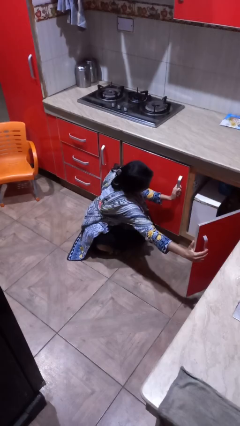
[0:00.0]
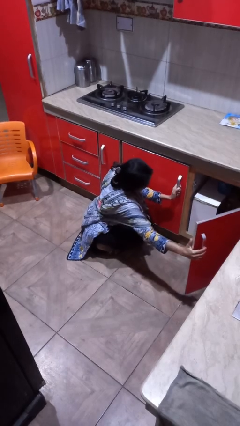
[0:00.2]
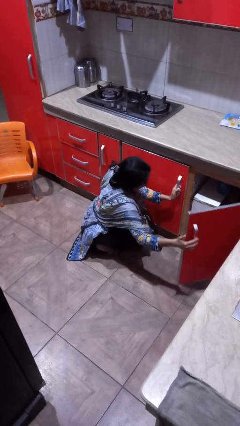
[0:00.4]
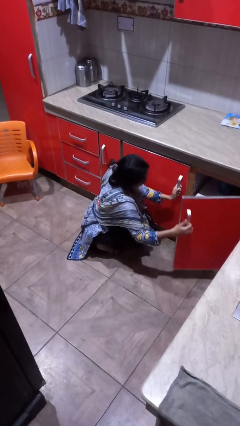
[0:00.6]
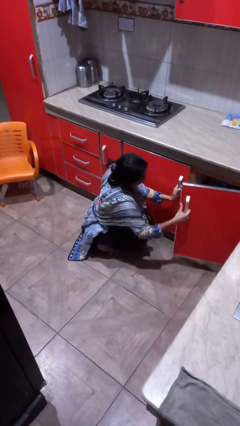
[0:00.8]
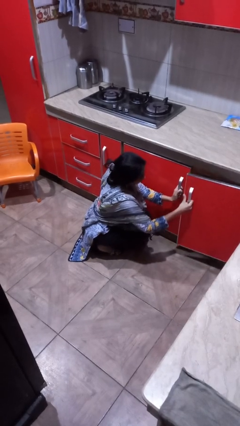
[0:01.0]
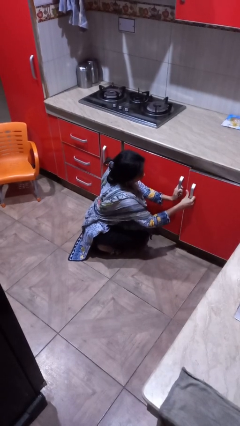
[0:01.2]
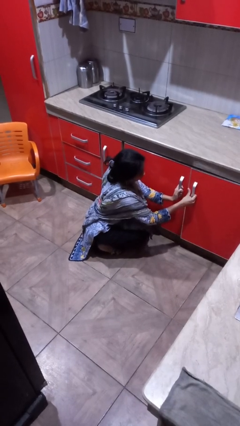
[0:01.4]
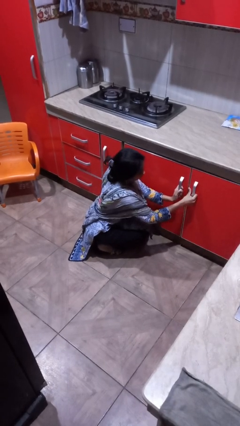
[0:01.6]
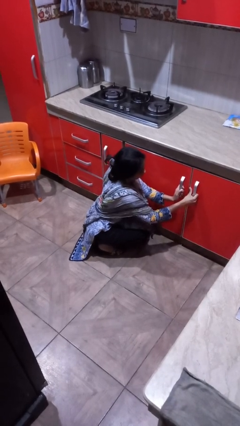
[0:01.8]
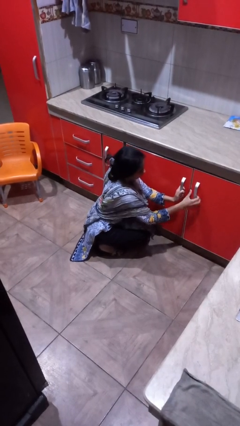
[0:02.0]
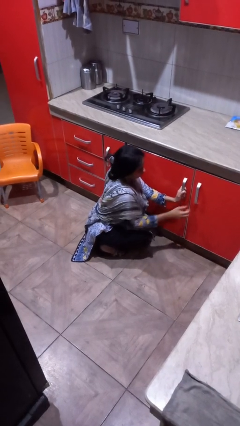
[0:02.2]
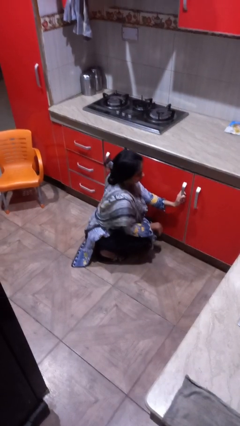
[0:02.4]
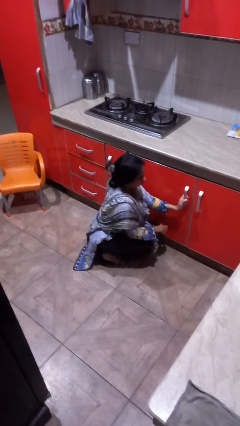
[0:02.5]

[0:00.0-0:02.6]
person closes cabinet

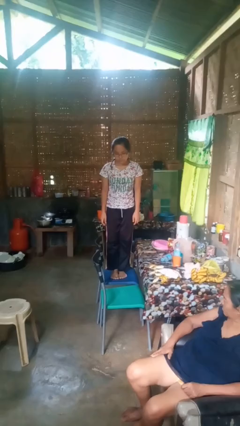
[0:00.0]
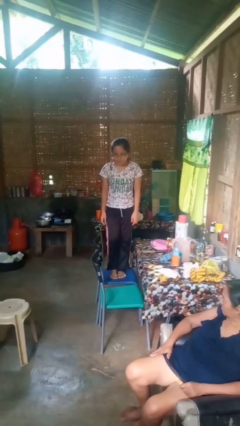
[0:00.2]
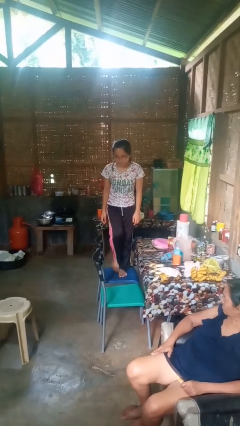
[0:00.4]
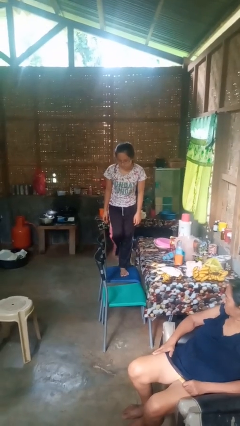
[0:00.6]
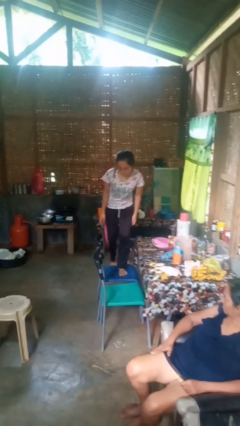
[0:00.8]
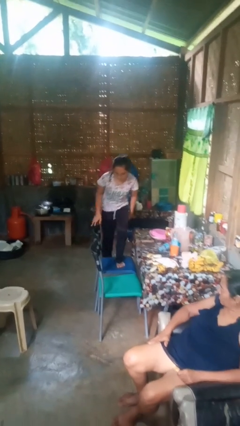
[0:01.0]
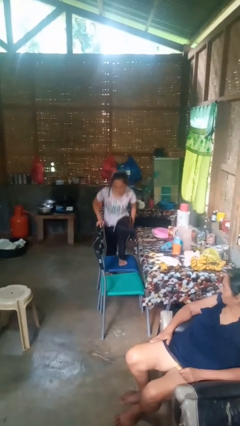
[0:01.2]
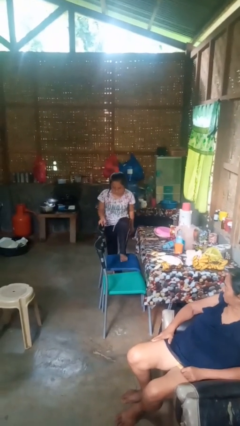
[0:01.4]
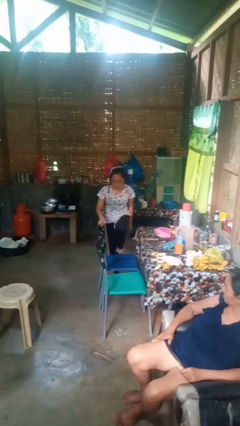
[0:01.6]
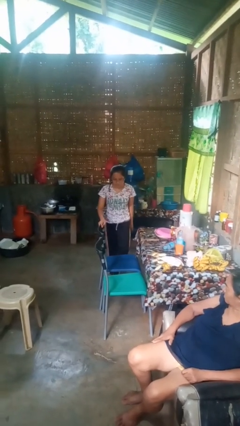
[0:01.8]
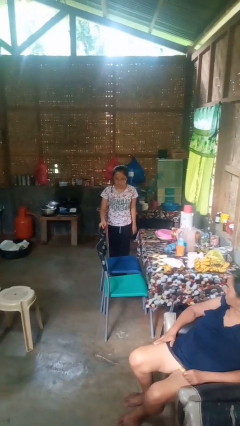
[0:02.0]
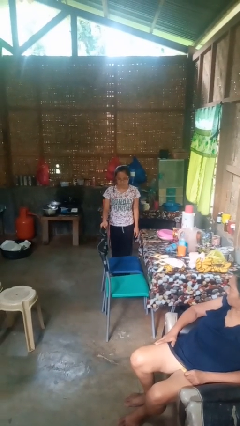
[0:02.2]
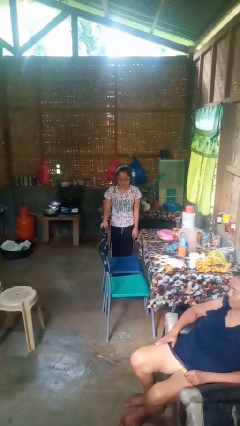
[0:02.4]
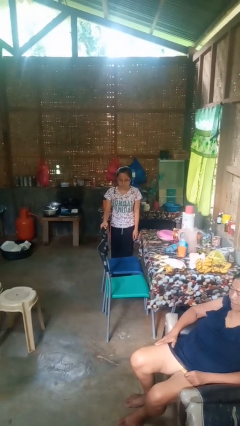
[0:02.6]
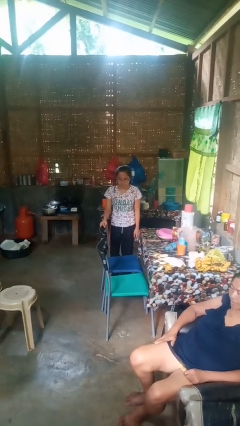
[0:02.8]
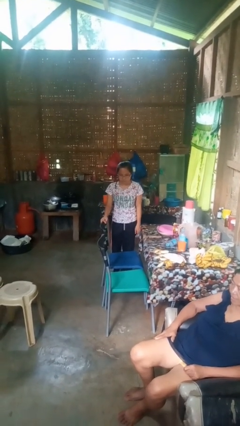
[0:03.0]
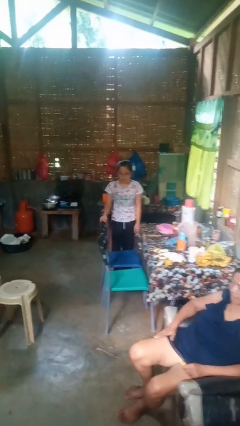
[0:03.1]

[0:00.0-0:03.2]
person climbs off chair

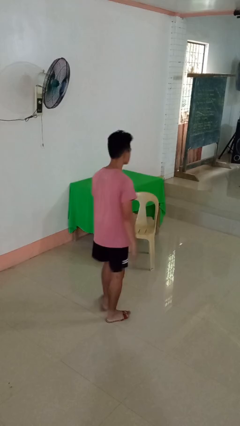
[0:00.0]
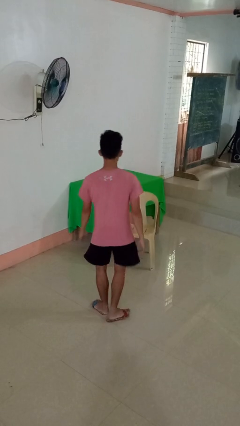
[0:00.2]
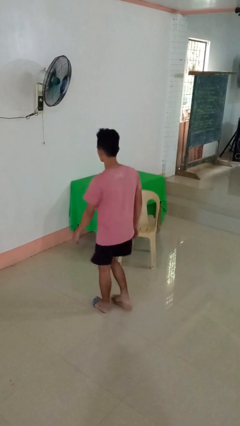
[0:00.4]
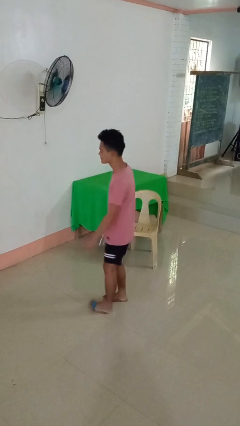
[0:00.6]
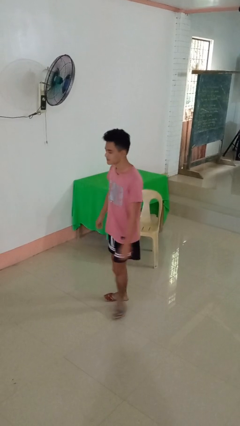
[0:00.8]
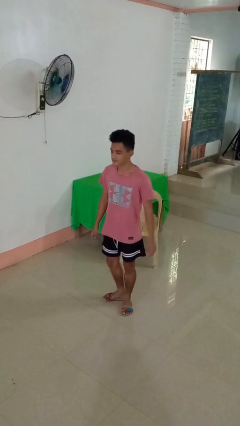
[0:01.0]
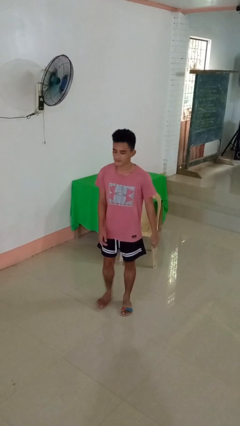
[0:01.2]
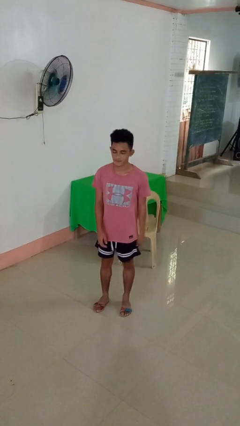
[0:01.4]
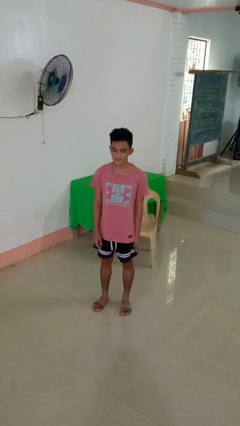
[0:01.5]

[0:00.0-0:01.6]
person twirls

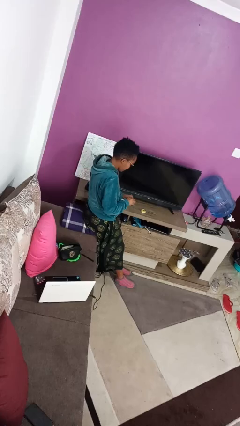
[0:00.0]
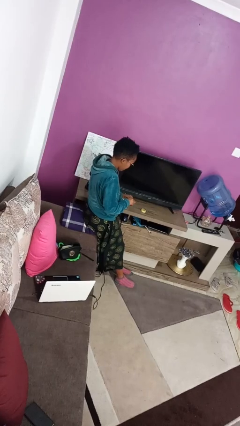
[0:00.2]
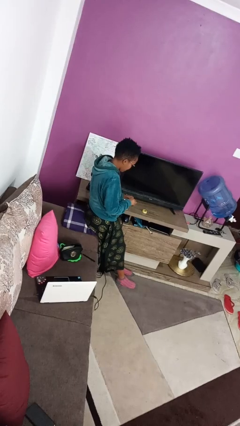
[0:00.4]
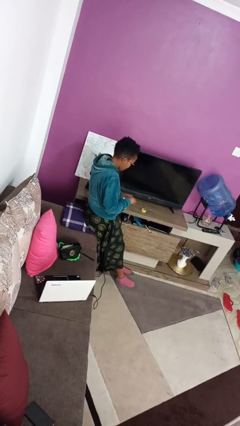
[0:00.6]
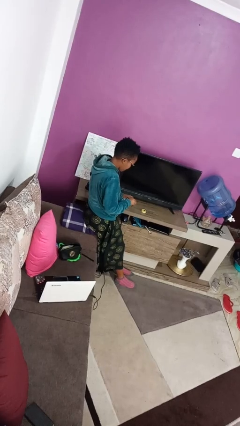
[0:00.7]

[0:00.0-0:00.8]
person lights candle

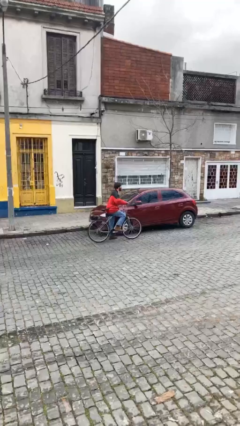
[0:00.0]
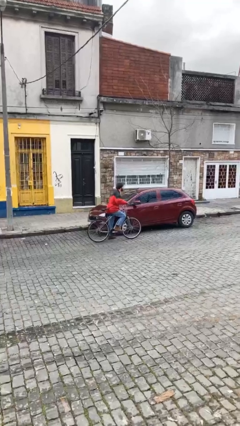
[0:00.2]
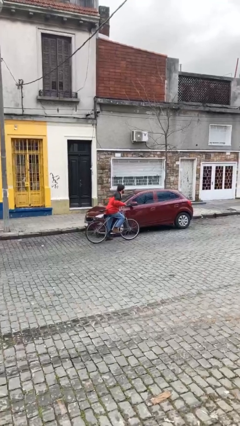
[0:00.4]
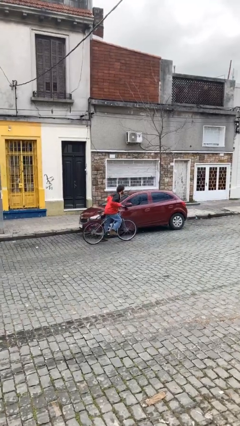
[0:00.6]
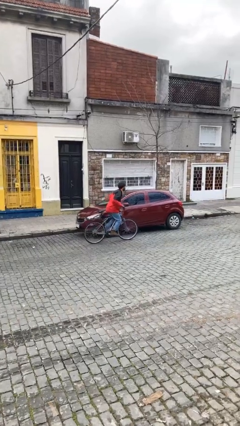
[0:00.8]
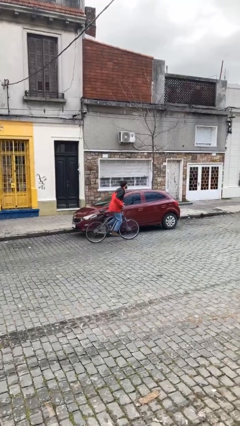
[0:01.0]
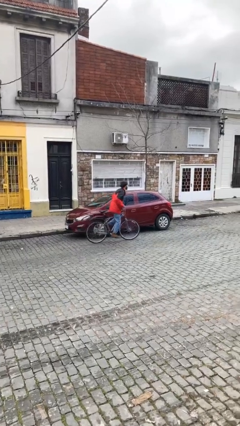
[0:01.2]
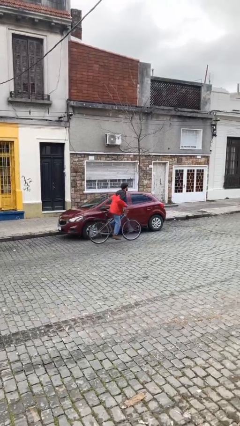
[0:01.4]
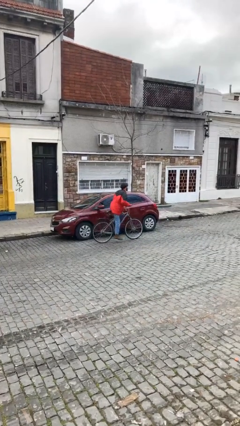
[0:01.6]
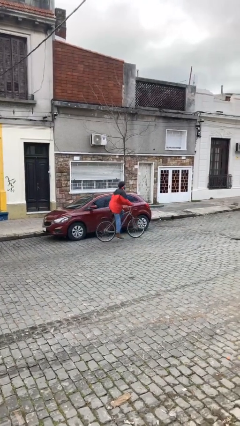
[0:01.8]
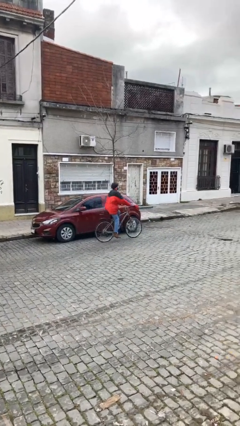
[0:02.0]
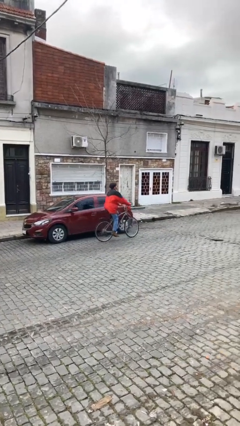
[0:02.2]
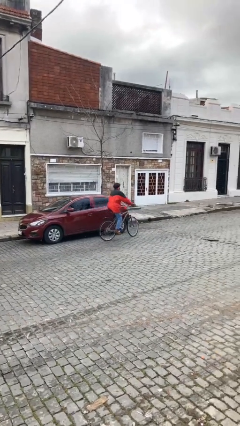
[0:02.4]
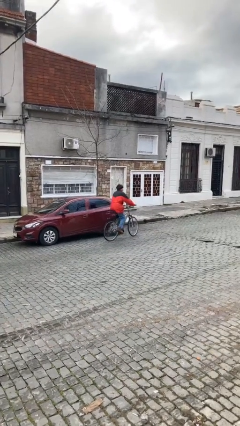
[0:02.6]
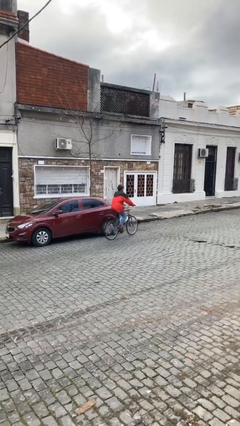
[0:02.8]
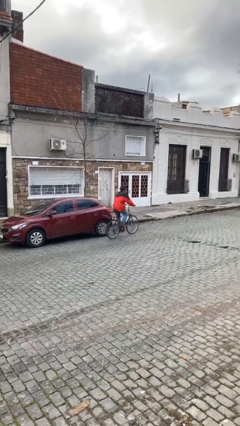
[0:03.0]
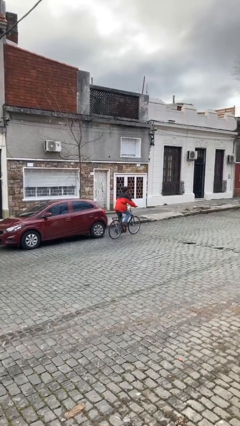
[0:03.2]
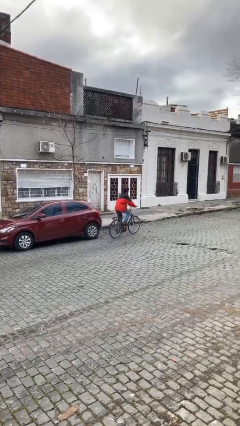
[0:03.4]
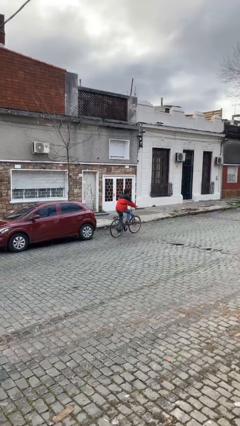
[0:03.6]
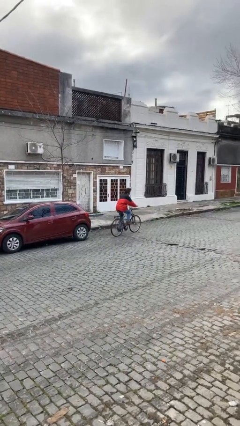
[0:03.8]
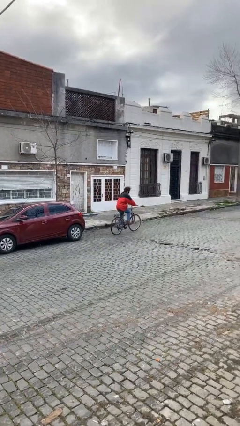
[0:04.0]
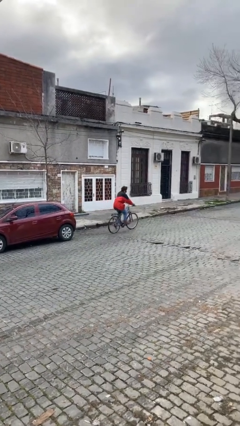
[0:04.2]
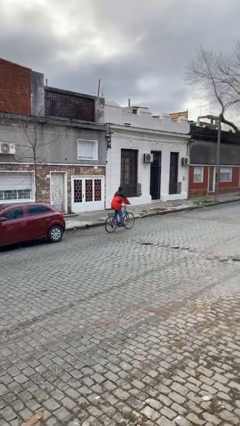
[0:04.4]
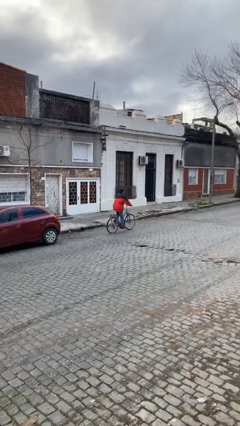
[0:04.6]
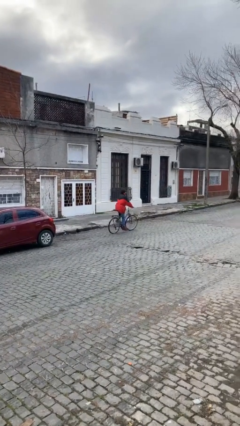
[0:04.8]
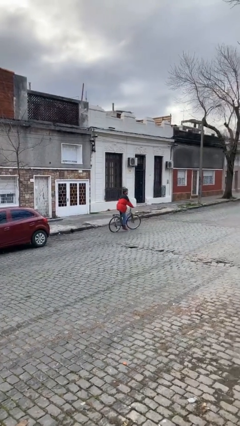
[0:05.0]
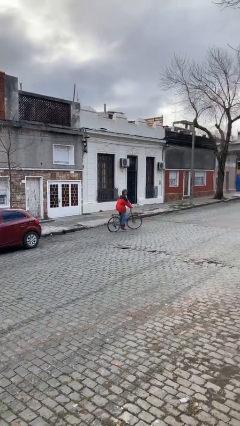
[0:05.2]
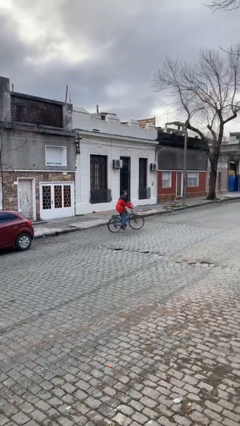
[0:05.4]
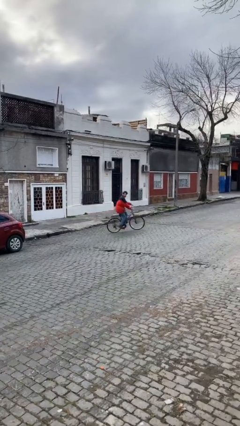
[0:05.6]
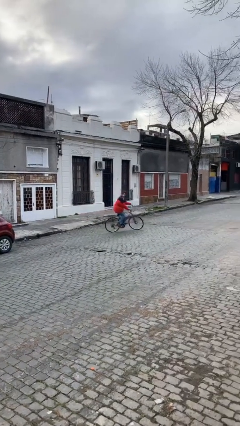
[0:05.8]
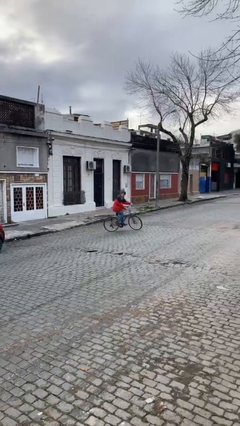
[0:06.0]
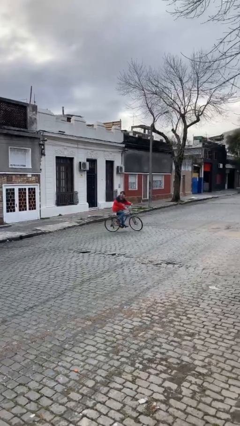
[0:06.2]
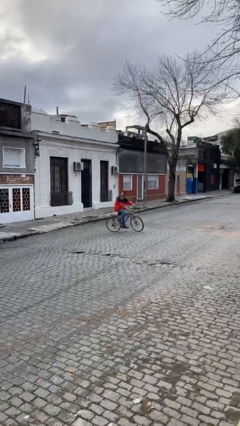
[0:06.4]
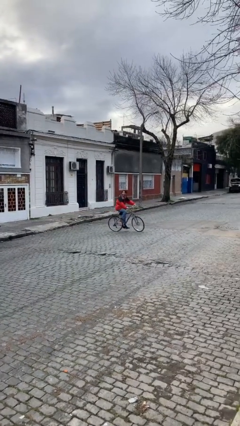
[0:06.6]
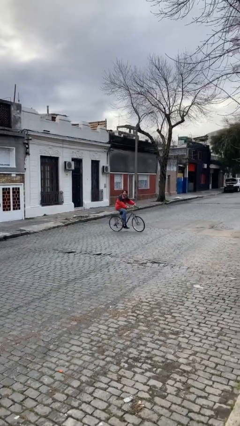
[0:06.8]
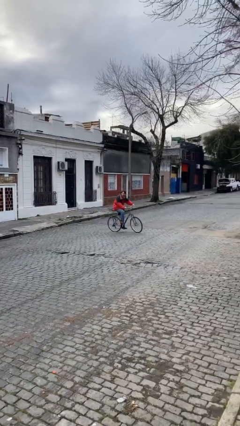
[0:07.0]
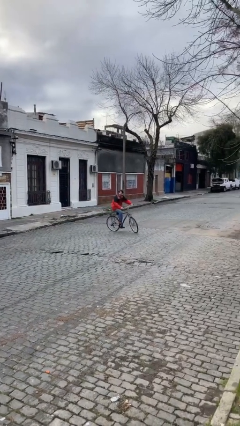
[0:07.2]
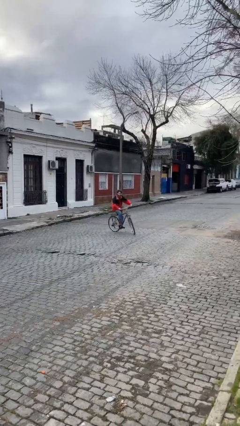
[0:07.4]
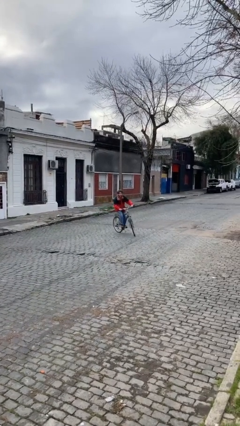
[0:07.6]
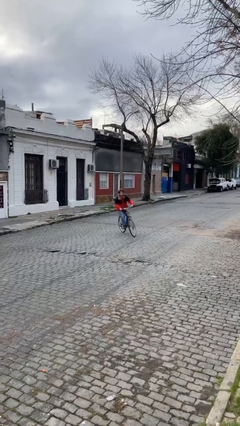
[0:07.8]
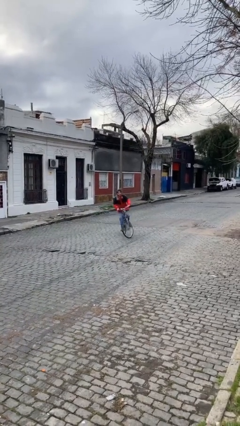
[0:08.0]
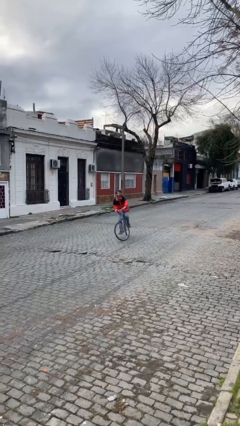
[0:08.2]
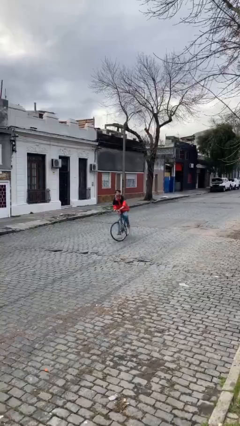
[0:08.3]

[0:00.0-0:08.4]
person rides bicycle

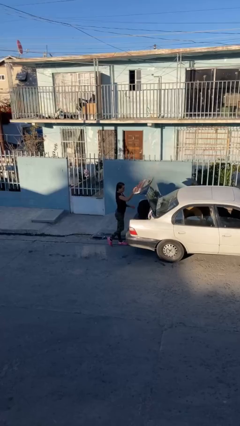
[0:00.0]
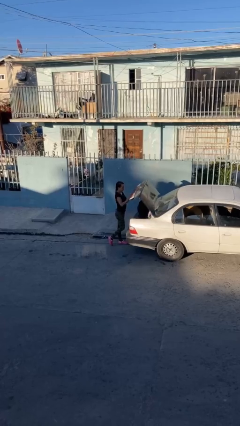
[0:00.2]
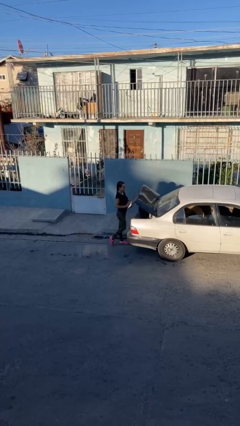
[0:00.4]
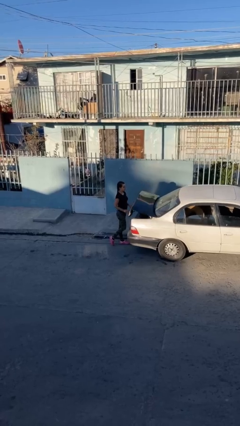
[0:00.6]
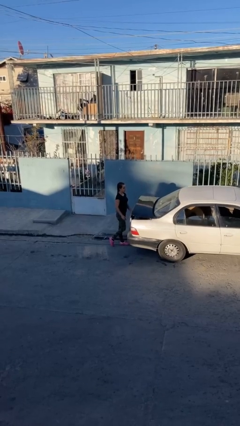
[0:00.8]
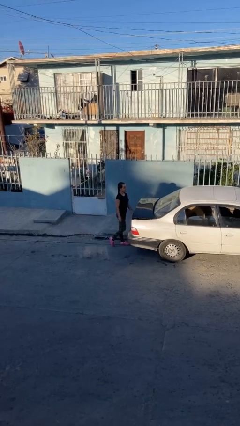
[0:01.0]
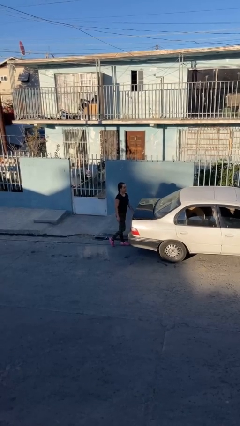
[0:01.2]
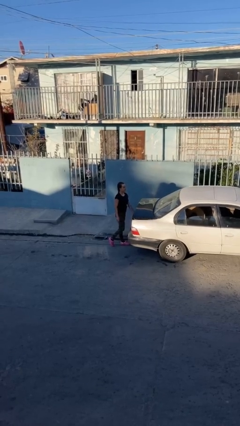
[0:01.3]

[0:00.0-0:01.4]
person closes car trunk
